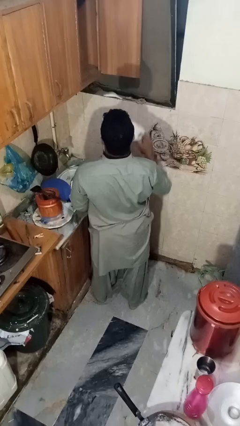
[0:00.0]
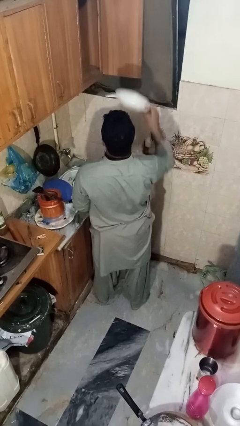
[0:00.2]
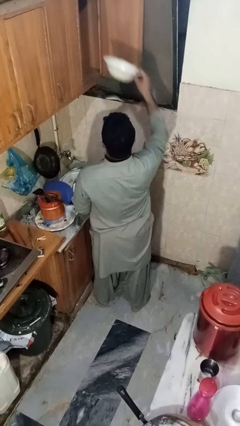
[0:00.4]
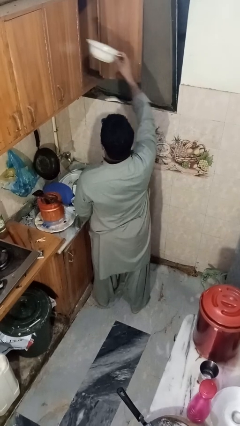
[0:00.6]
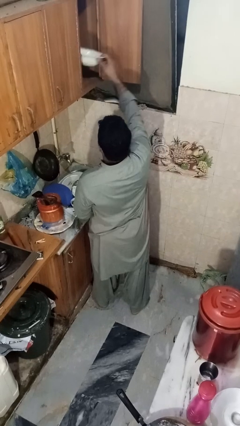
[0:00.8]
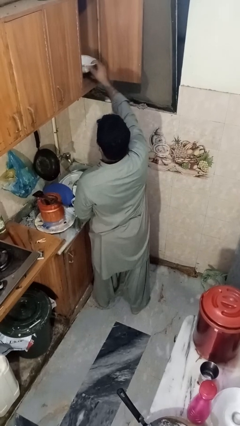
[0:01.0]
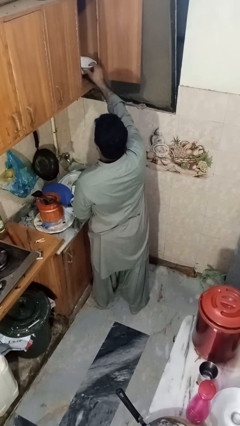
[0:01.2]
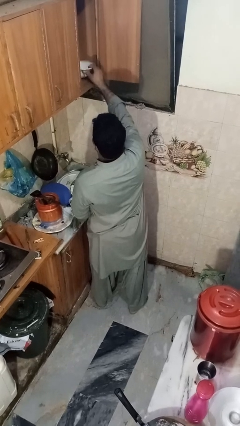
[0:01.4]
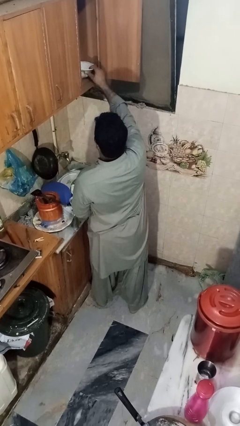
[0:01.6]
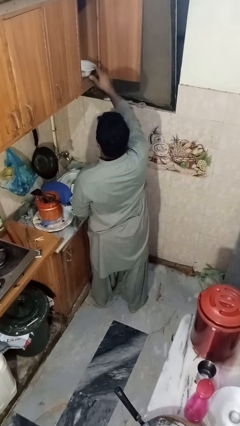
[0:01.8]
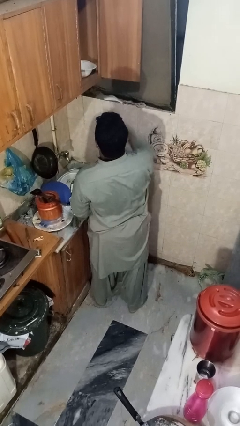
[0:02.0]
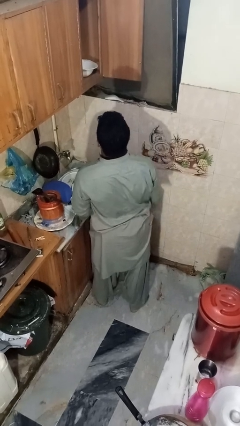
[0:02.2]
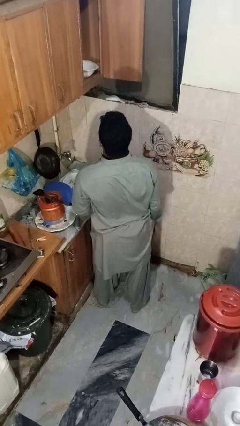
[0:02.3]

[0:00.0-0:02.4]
person puts object in cabinet

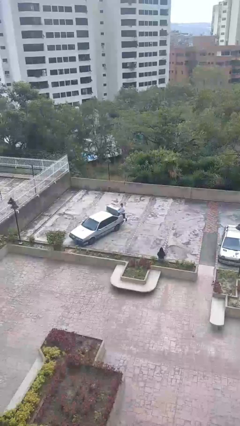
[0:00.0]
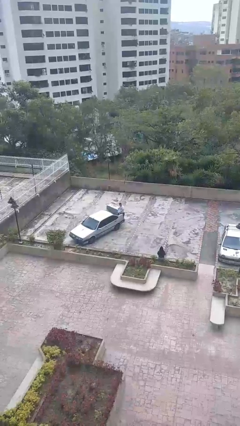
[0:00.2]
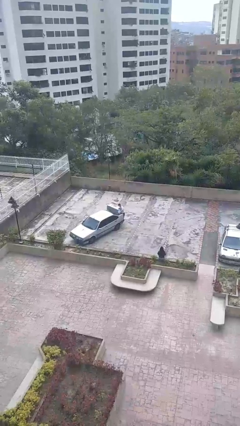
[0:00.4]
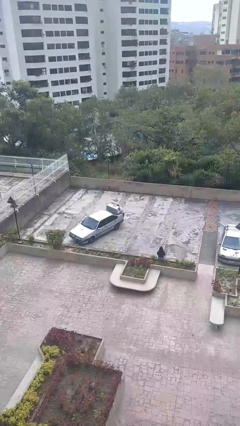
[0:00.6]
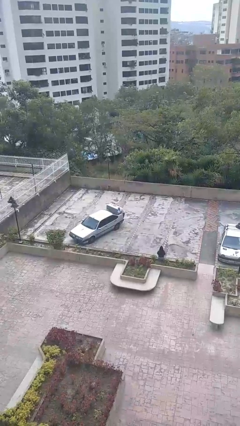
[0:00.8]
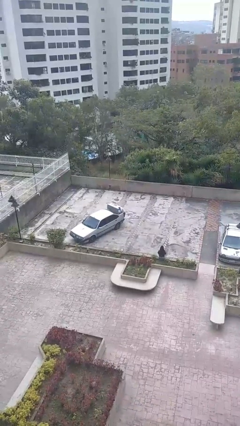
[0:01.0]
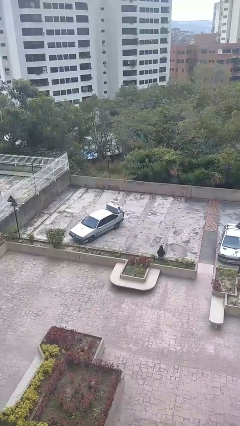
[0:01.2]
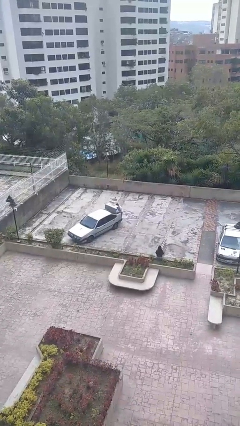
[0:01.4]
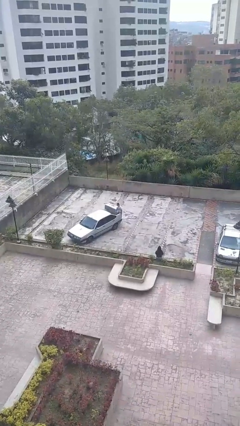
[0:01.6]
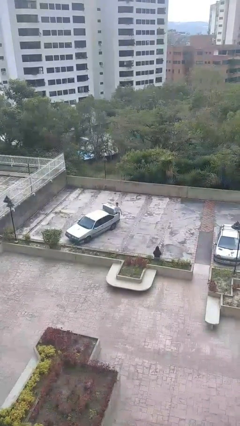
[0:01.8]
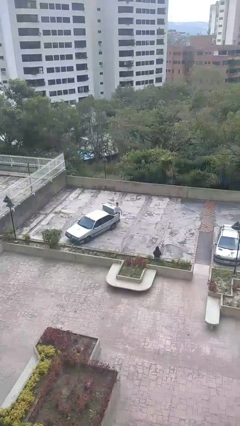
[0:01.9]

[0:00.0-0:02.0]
person loads car

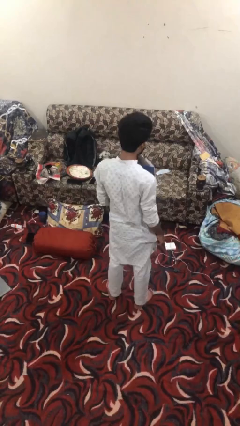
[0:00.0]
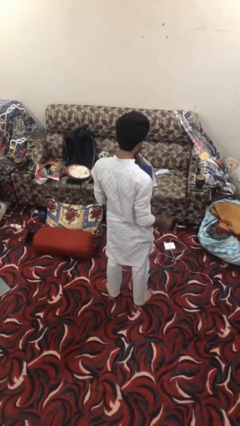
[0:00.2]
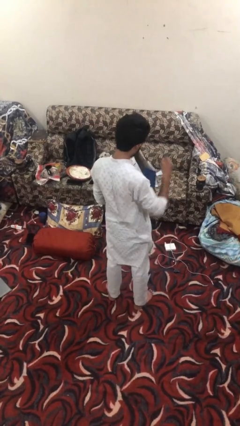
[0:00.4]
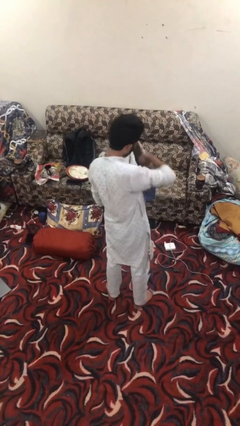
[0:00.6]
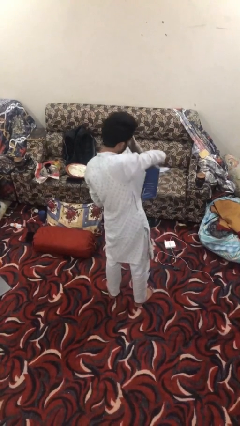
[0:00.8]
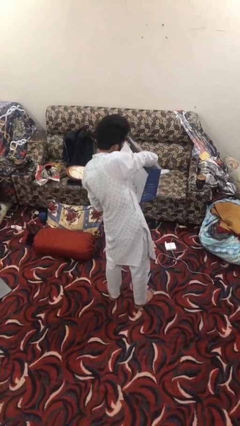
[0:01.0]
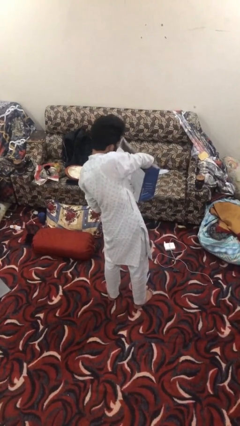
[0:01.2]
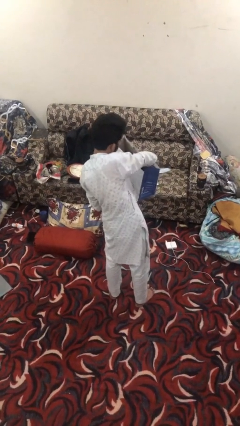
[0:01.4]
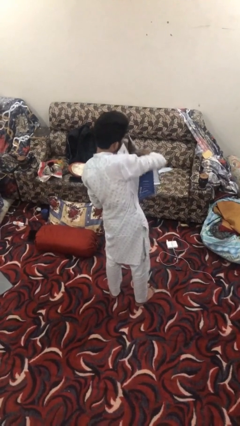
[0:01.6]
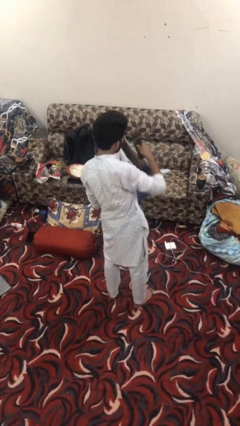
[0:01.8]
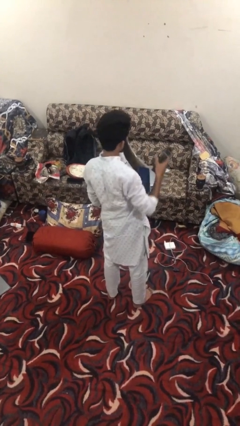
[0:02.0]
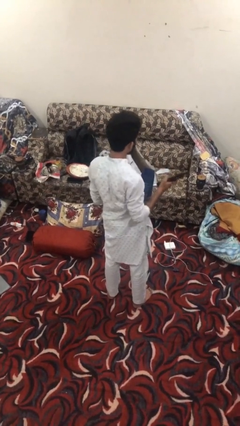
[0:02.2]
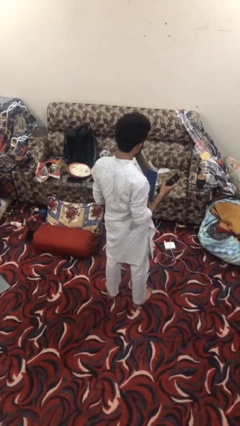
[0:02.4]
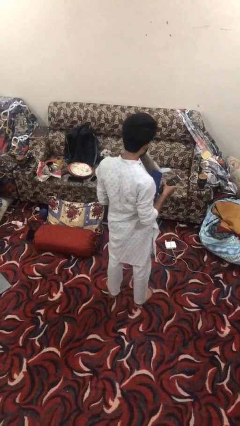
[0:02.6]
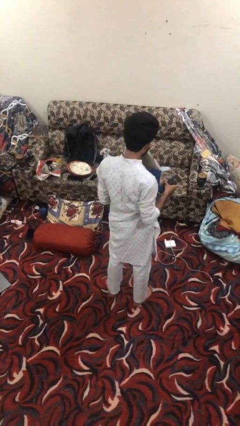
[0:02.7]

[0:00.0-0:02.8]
person takes object from bag

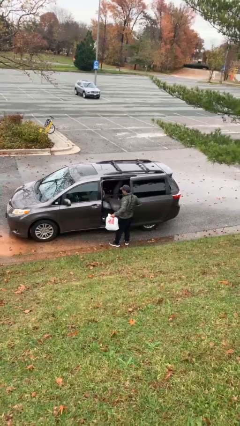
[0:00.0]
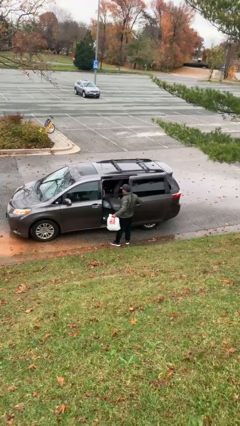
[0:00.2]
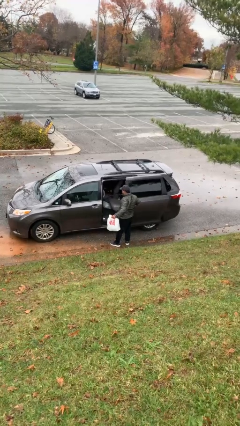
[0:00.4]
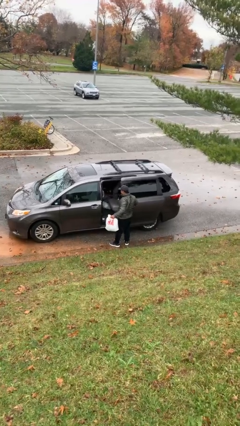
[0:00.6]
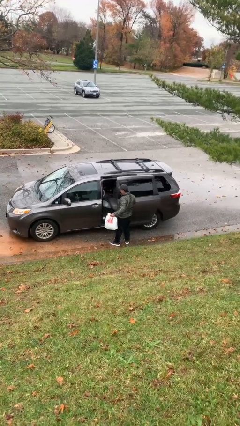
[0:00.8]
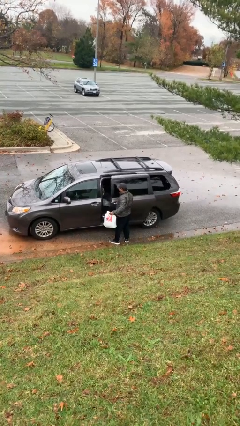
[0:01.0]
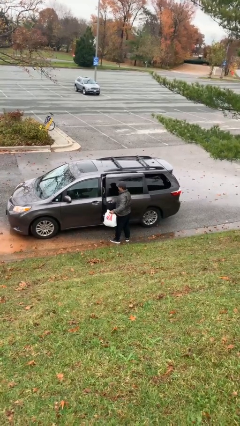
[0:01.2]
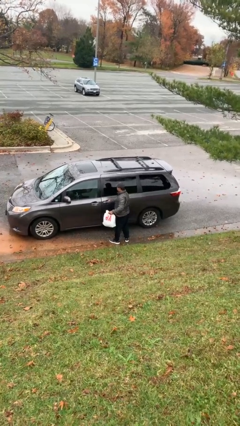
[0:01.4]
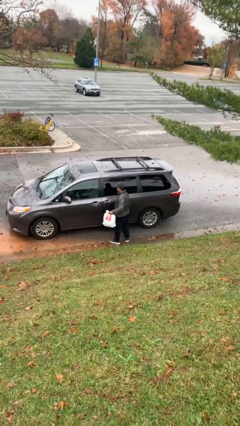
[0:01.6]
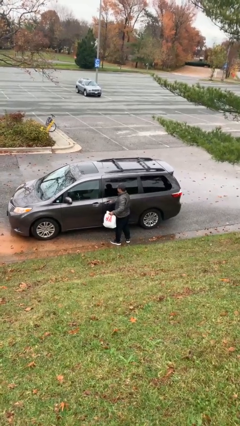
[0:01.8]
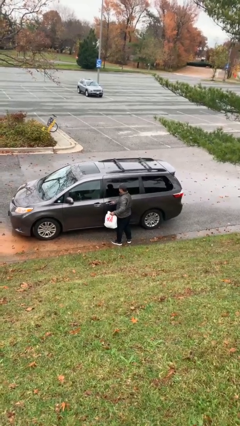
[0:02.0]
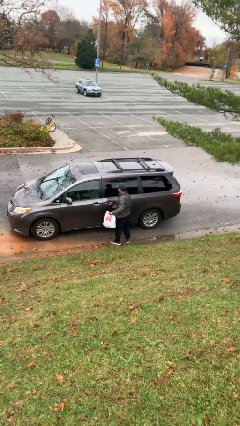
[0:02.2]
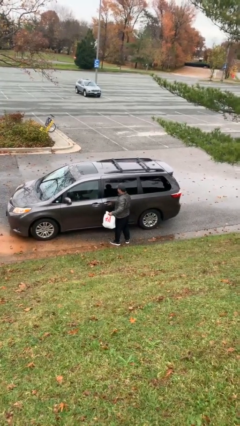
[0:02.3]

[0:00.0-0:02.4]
person closes car door

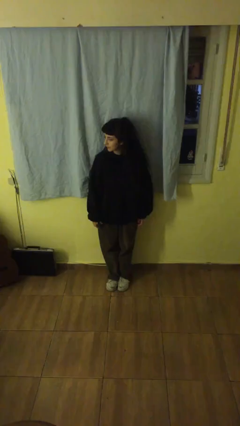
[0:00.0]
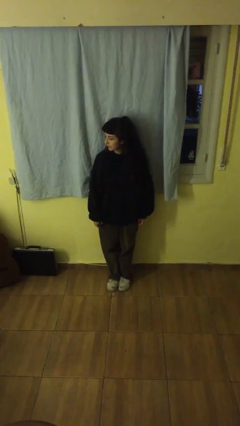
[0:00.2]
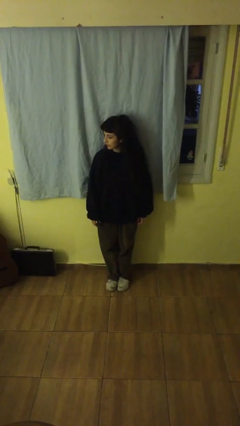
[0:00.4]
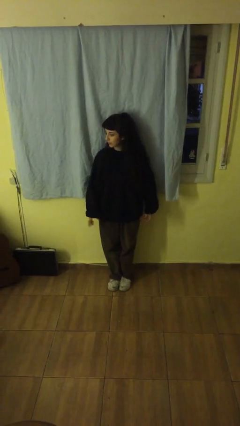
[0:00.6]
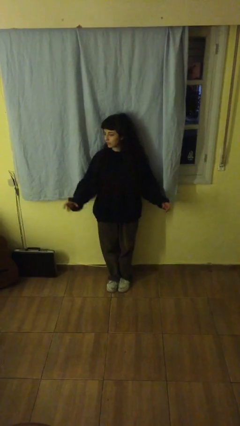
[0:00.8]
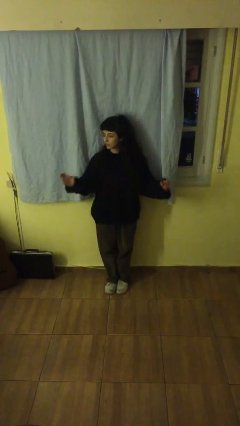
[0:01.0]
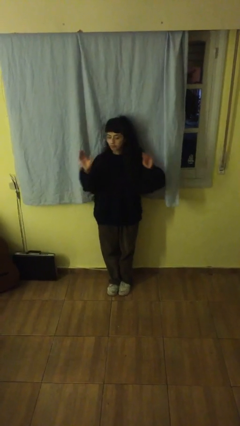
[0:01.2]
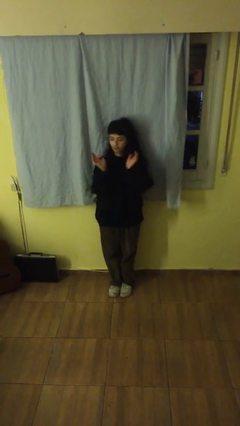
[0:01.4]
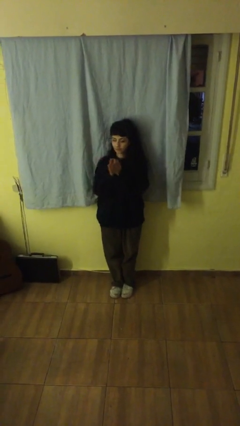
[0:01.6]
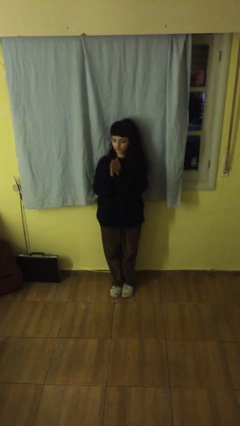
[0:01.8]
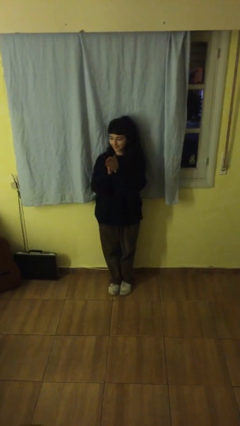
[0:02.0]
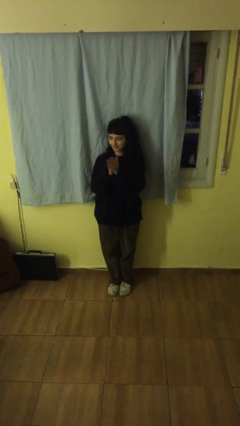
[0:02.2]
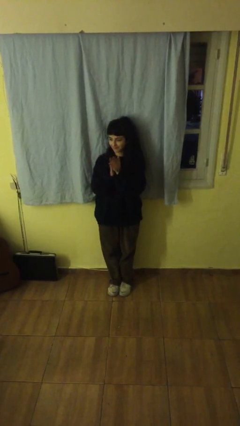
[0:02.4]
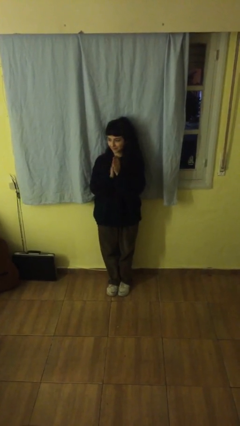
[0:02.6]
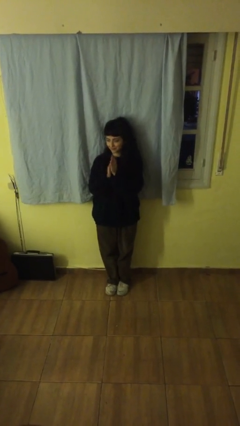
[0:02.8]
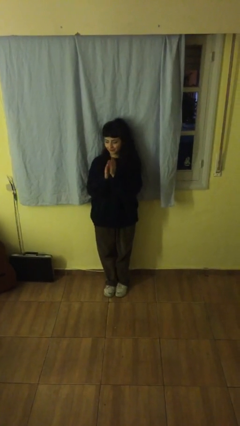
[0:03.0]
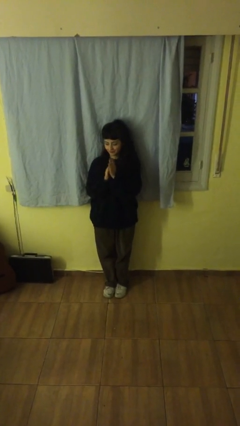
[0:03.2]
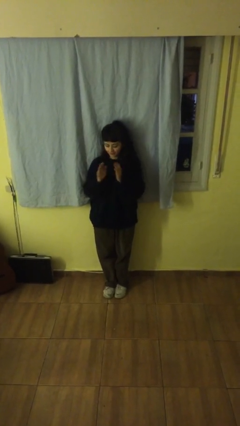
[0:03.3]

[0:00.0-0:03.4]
person claps hands

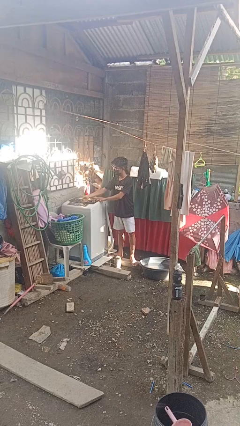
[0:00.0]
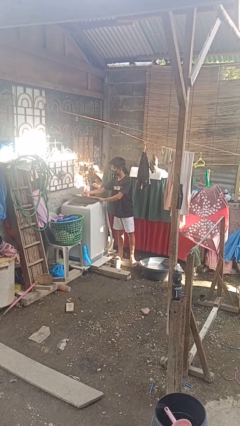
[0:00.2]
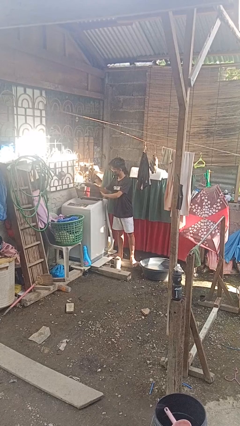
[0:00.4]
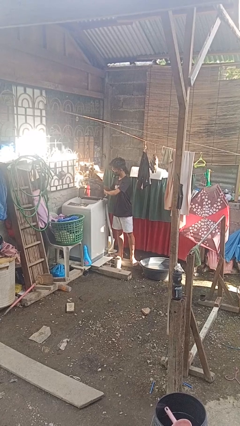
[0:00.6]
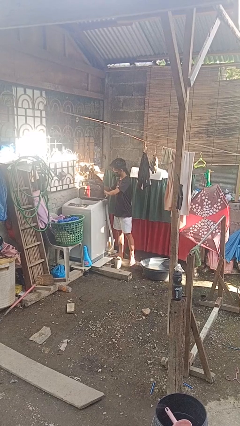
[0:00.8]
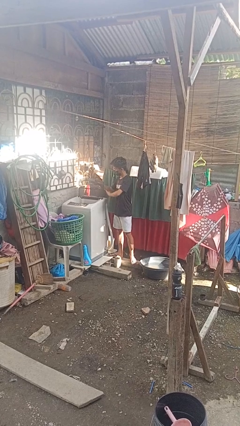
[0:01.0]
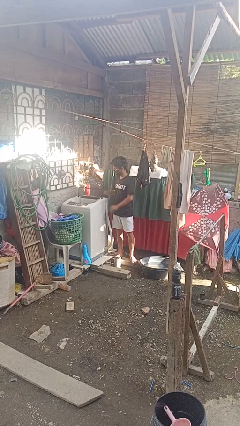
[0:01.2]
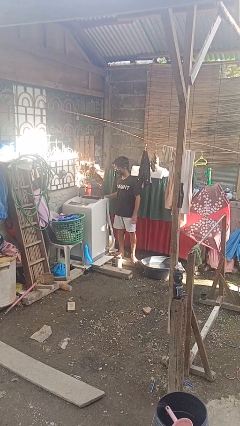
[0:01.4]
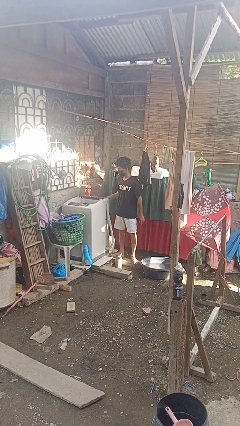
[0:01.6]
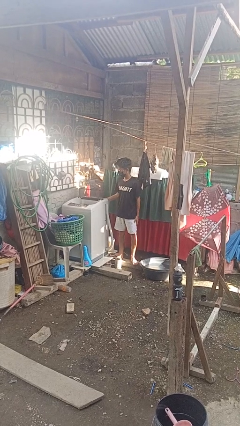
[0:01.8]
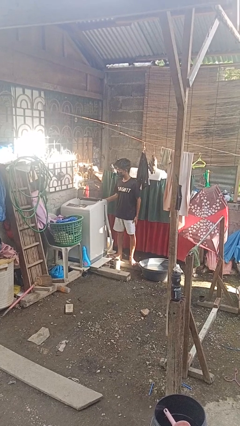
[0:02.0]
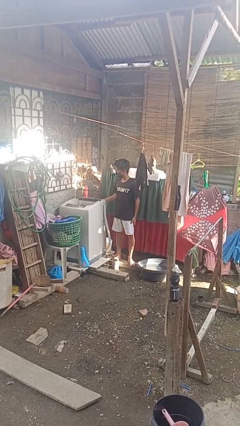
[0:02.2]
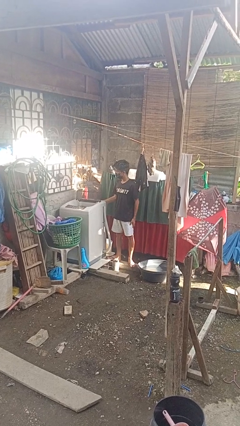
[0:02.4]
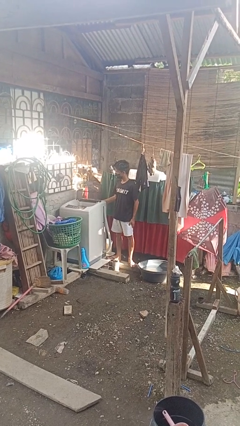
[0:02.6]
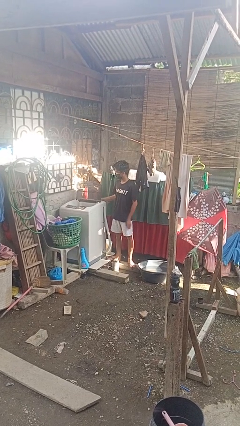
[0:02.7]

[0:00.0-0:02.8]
person opens clothes washer

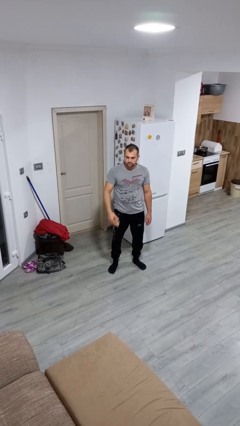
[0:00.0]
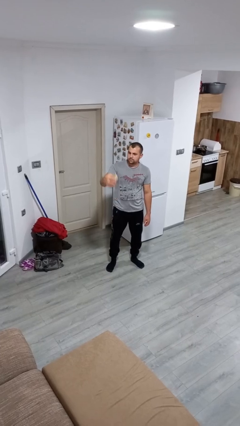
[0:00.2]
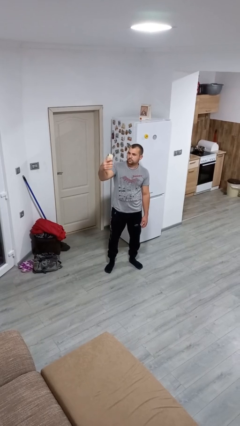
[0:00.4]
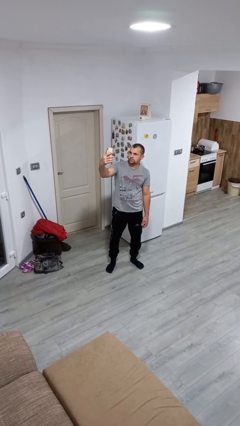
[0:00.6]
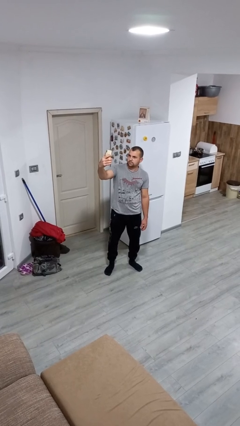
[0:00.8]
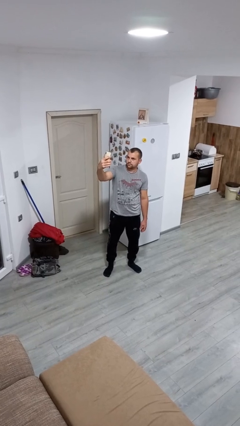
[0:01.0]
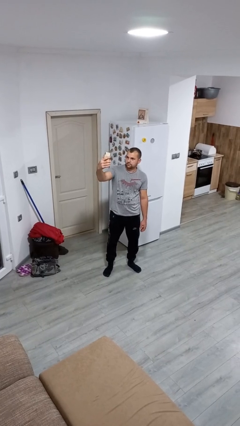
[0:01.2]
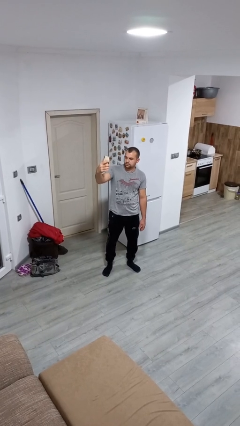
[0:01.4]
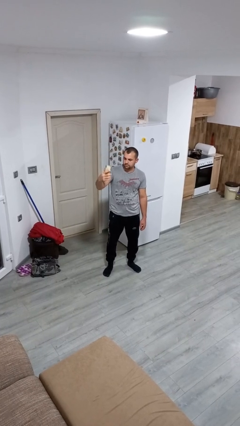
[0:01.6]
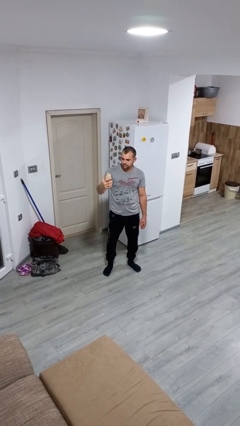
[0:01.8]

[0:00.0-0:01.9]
person takes selfie
